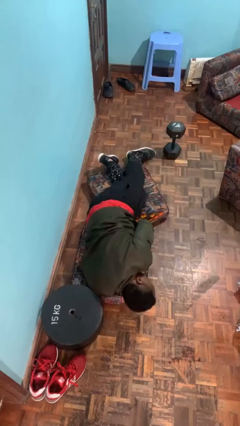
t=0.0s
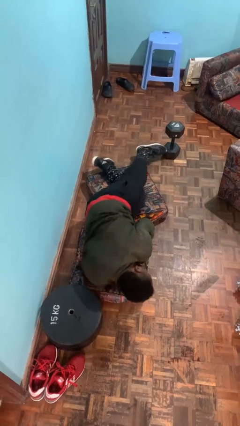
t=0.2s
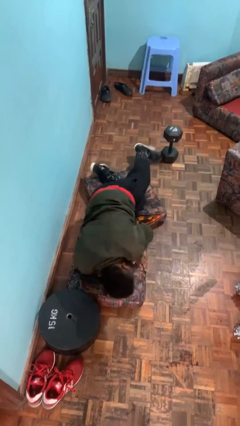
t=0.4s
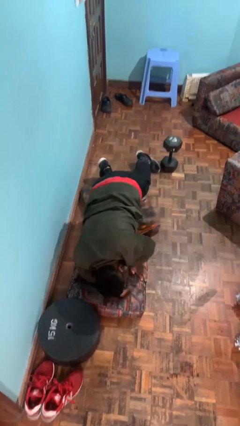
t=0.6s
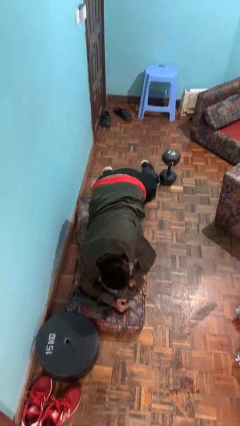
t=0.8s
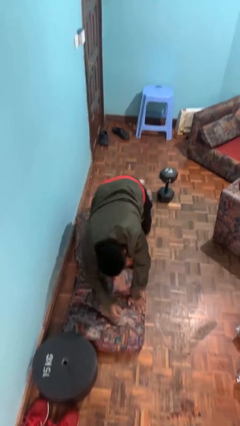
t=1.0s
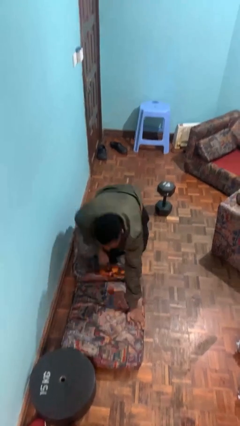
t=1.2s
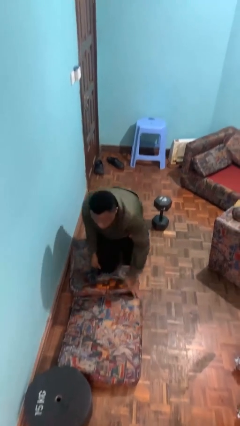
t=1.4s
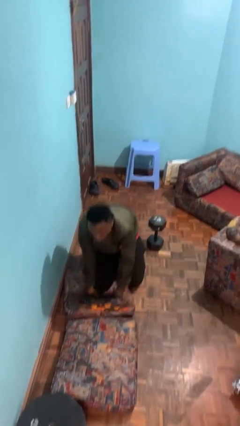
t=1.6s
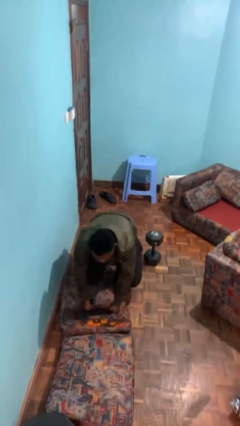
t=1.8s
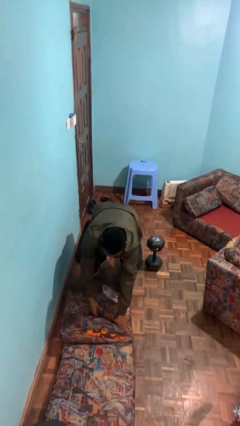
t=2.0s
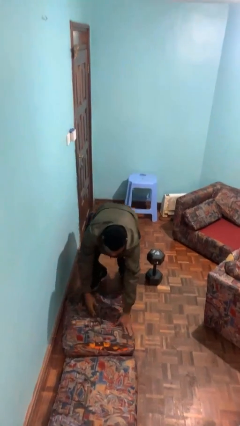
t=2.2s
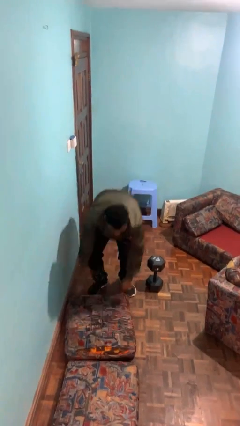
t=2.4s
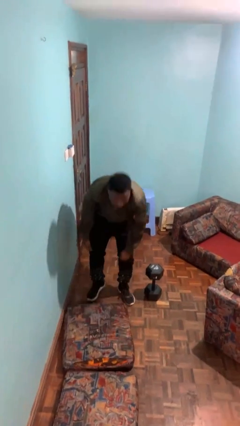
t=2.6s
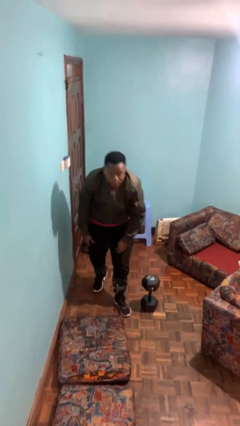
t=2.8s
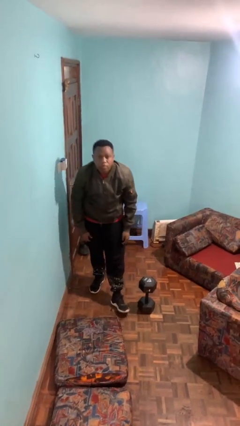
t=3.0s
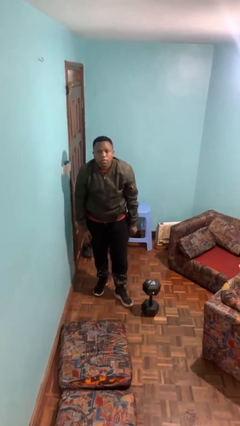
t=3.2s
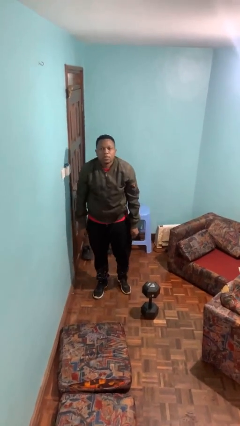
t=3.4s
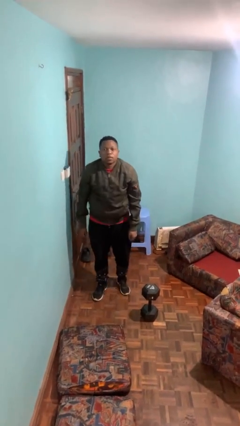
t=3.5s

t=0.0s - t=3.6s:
person stands up from floor

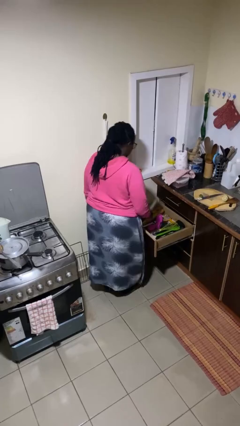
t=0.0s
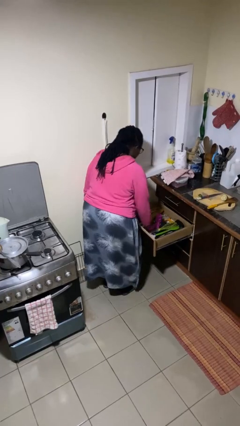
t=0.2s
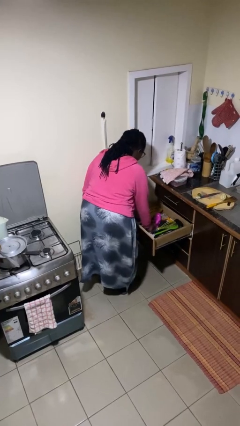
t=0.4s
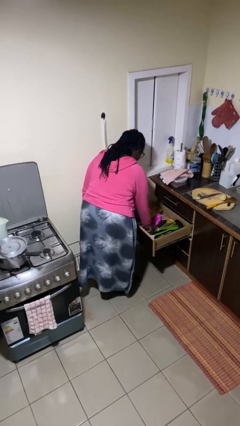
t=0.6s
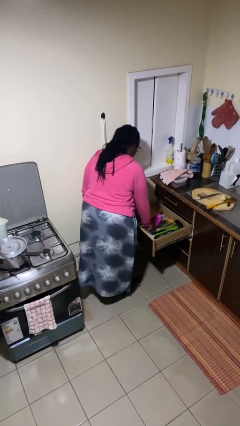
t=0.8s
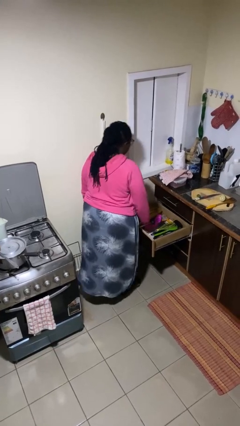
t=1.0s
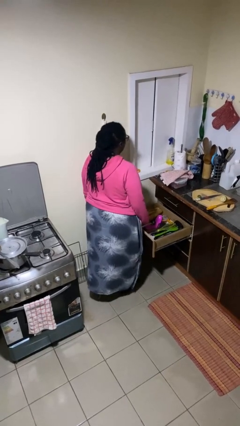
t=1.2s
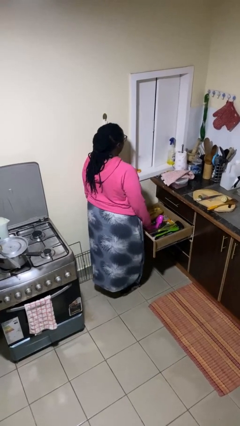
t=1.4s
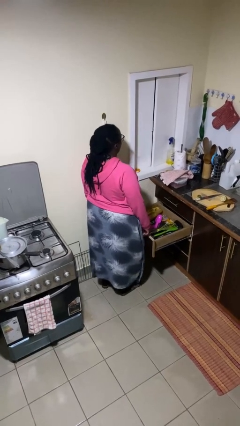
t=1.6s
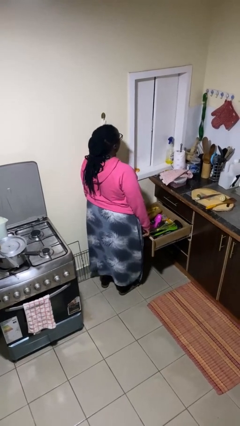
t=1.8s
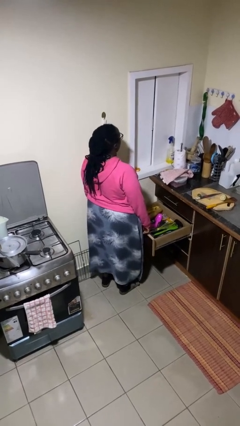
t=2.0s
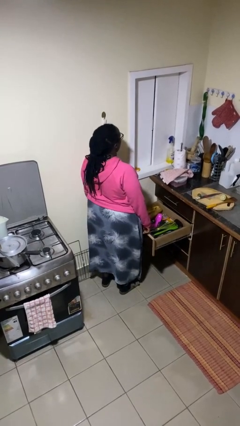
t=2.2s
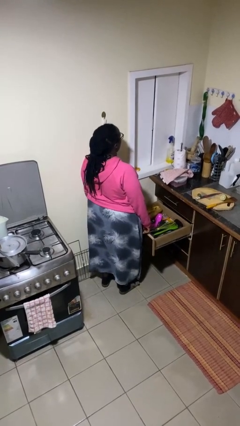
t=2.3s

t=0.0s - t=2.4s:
person puts object into kitchen drawer

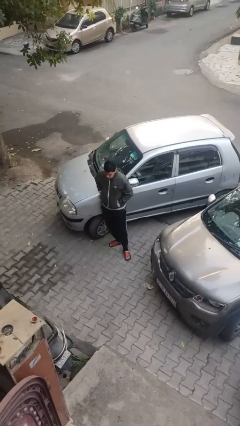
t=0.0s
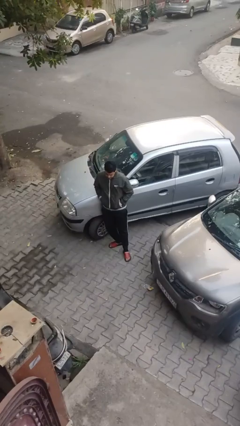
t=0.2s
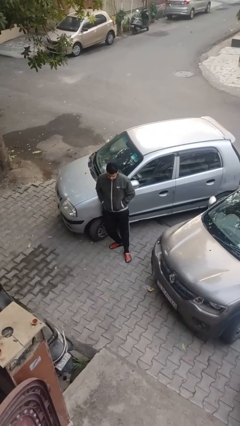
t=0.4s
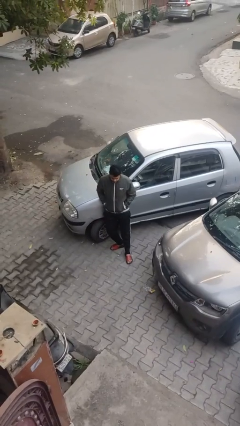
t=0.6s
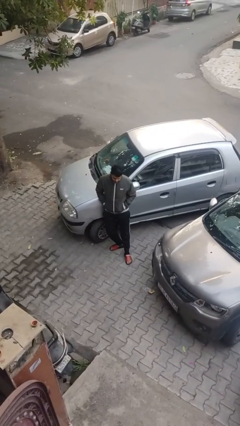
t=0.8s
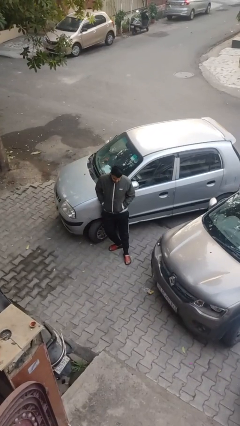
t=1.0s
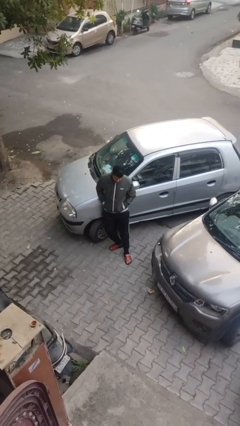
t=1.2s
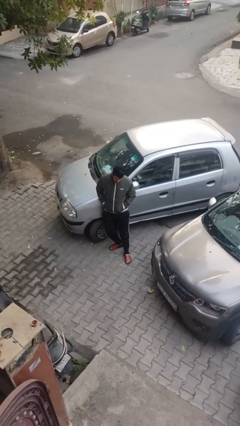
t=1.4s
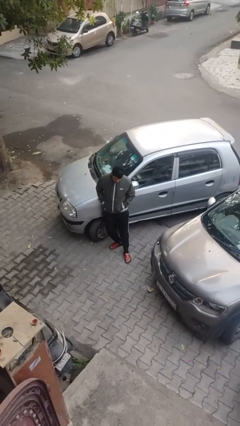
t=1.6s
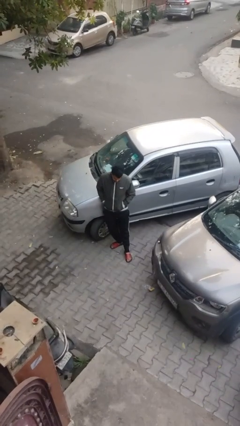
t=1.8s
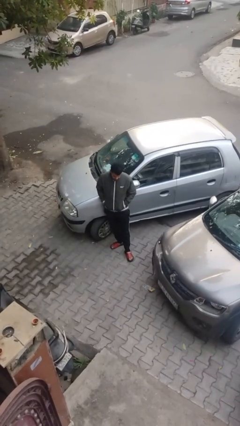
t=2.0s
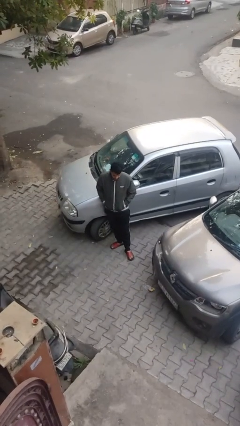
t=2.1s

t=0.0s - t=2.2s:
person leans against car

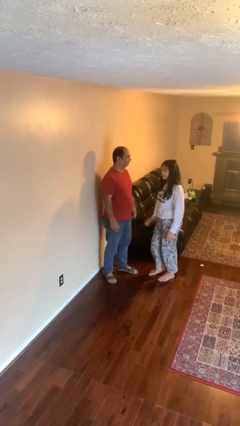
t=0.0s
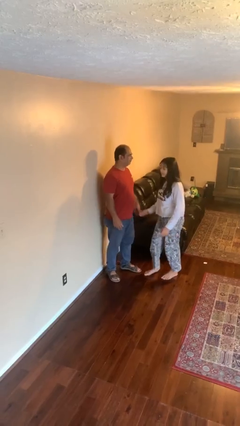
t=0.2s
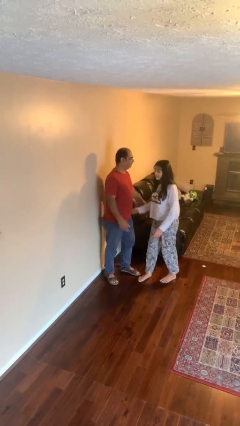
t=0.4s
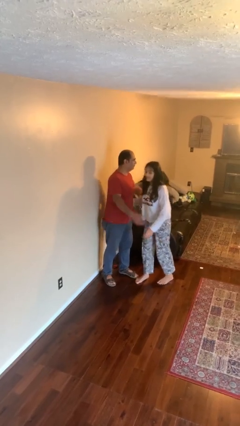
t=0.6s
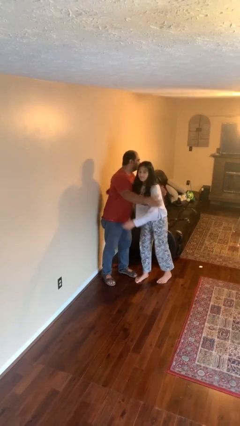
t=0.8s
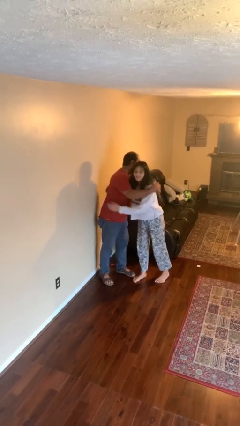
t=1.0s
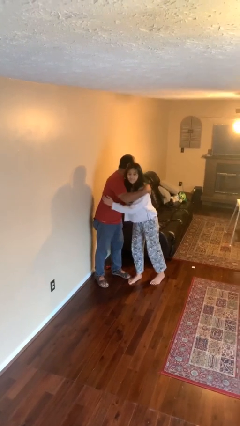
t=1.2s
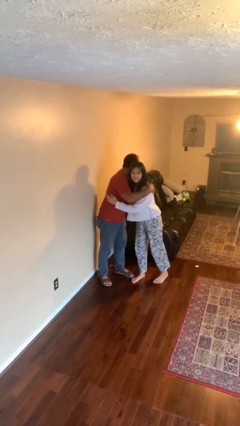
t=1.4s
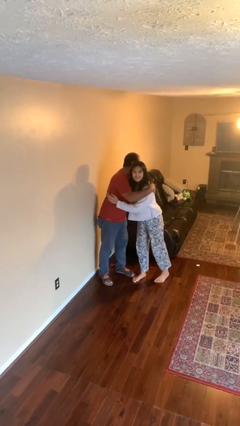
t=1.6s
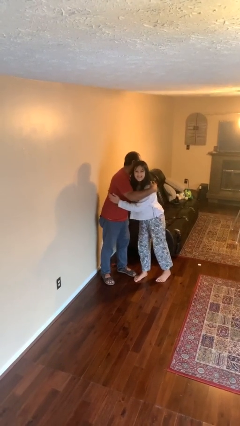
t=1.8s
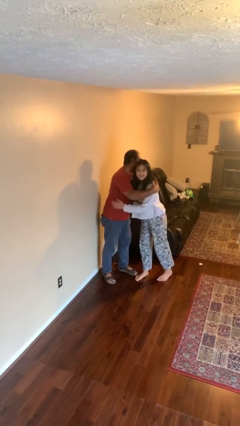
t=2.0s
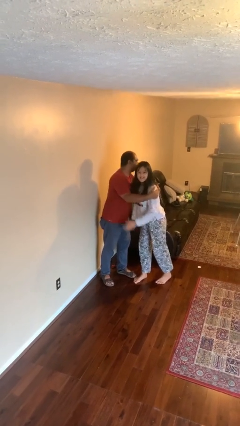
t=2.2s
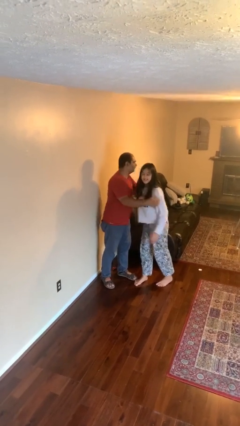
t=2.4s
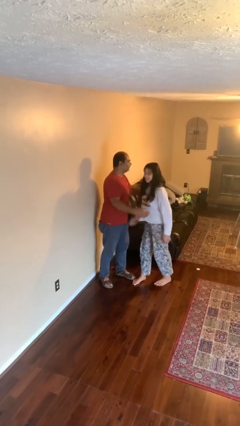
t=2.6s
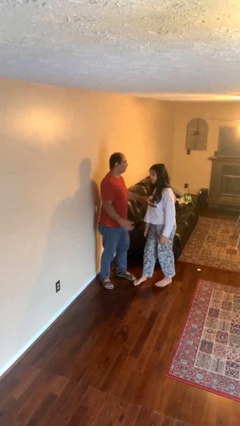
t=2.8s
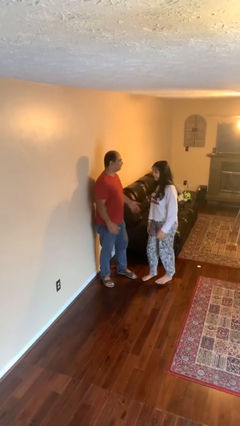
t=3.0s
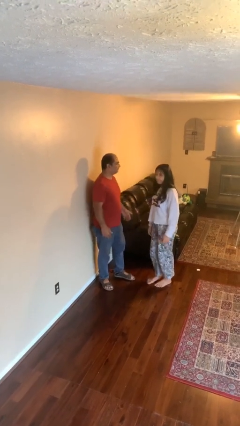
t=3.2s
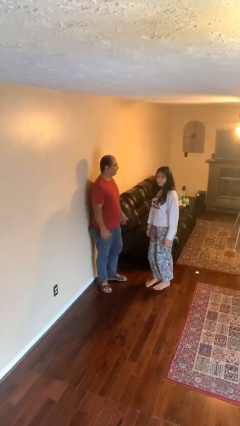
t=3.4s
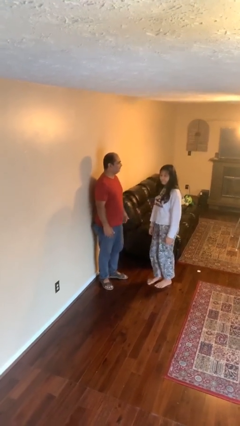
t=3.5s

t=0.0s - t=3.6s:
person embraces person

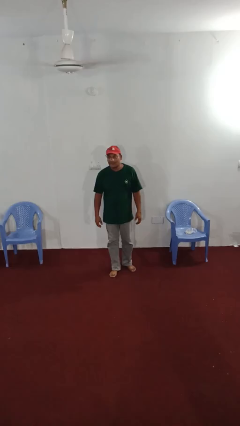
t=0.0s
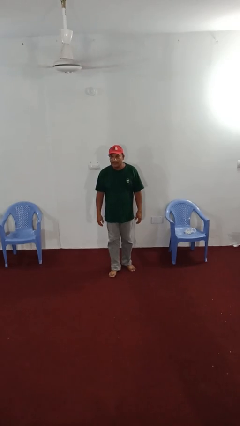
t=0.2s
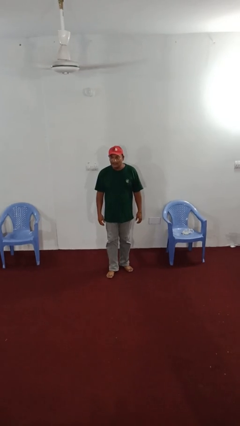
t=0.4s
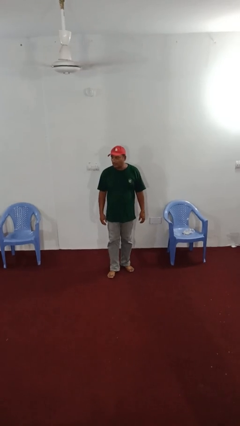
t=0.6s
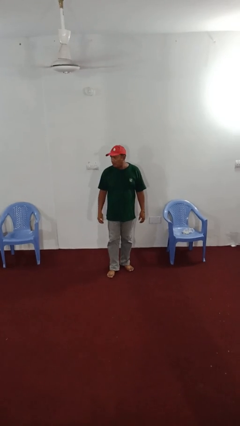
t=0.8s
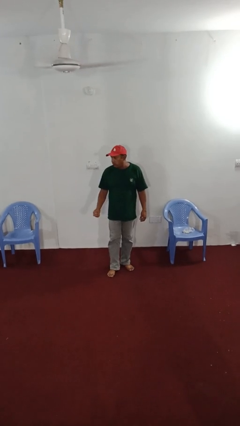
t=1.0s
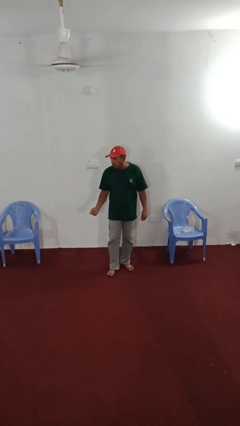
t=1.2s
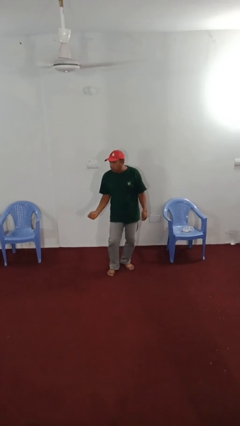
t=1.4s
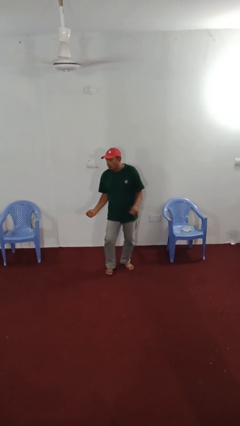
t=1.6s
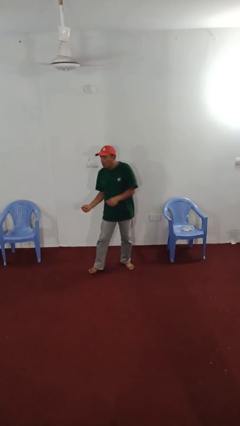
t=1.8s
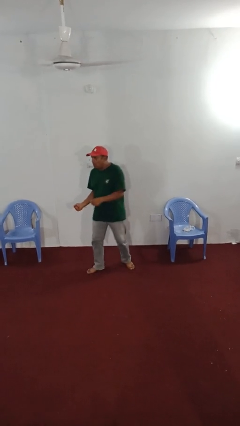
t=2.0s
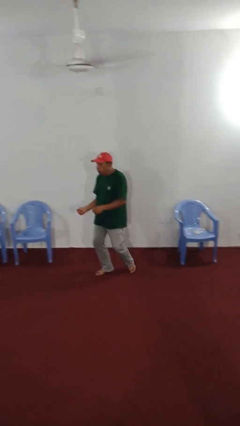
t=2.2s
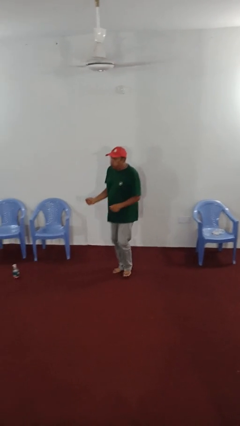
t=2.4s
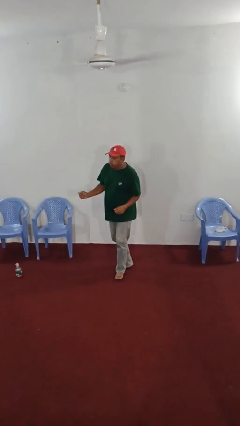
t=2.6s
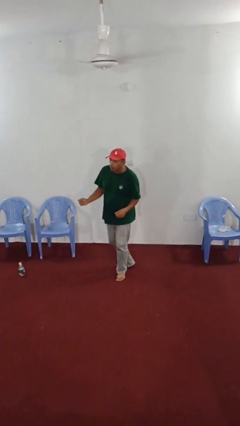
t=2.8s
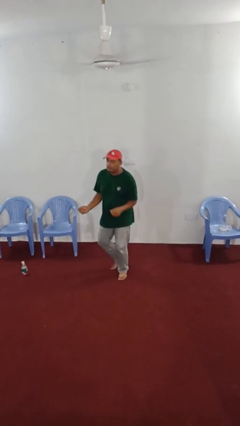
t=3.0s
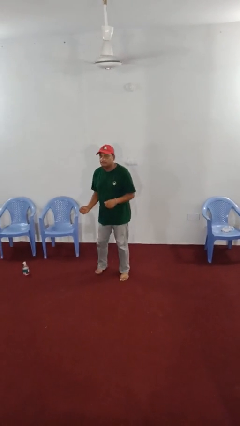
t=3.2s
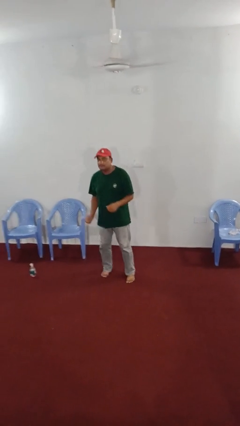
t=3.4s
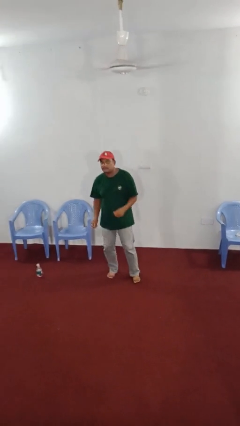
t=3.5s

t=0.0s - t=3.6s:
person dances in place

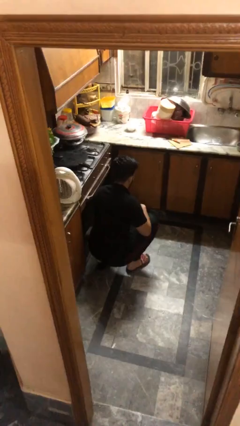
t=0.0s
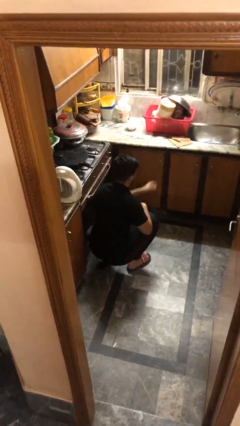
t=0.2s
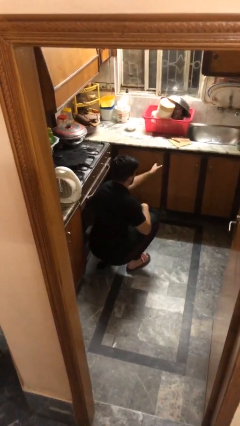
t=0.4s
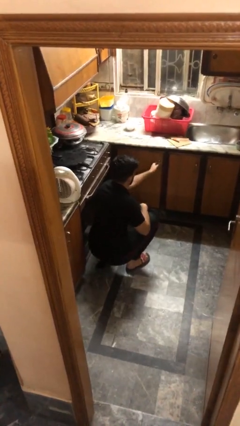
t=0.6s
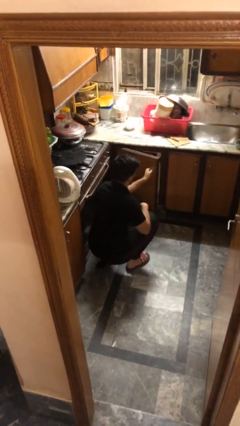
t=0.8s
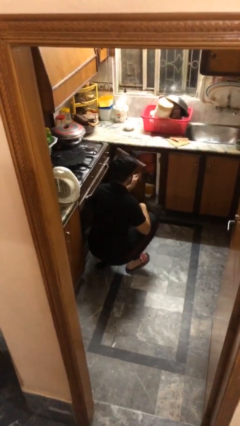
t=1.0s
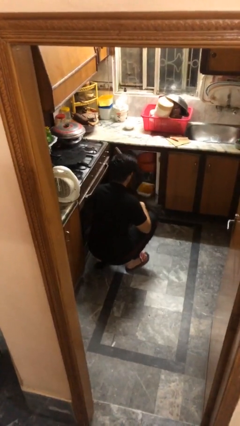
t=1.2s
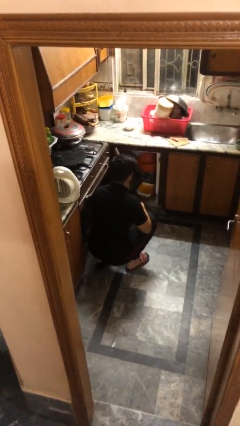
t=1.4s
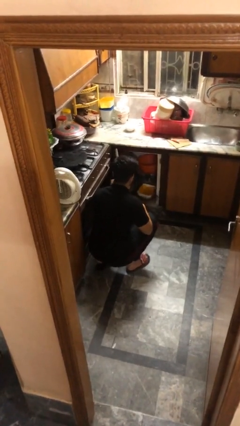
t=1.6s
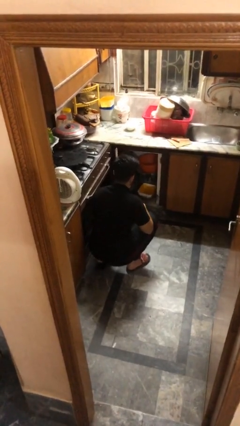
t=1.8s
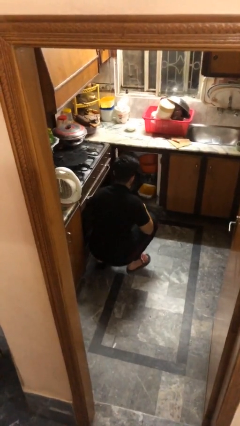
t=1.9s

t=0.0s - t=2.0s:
person opens kitchen drawer

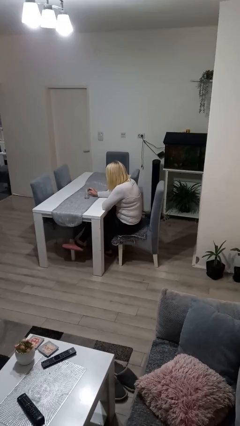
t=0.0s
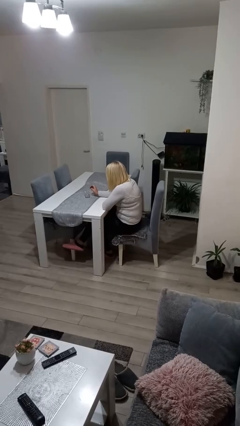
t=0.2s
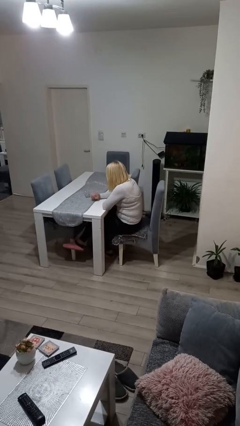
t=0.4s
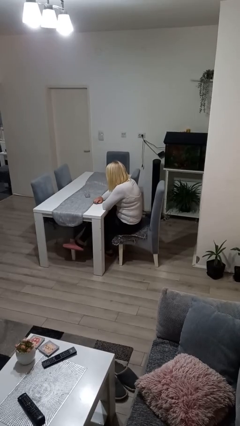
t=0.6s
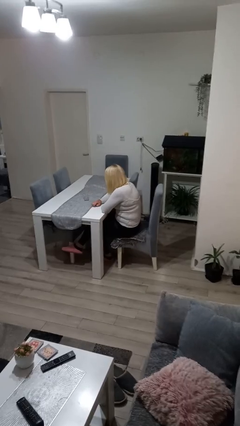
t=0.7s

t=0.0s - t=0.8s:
person knocks over glass
